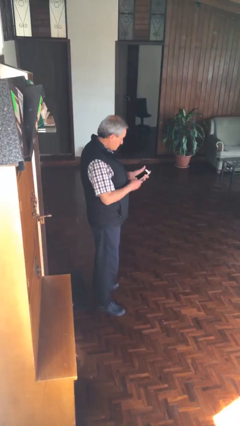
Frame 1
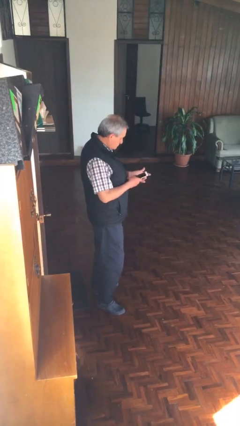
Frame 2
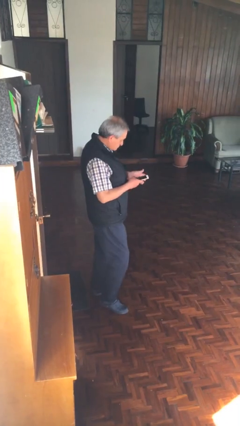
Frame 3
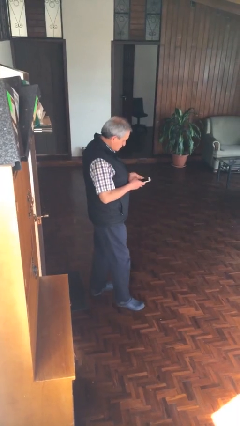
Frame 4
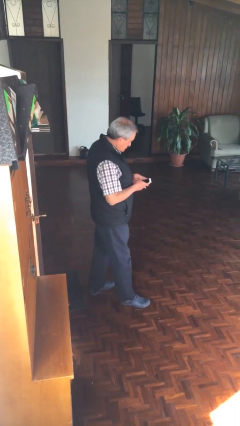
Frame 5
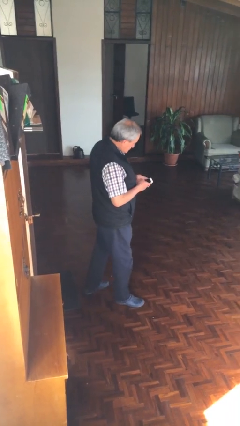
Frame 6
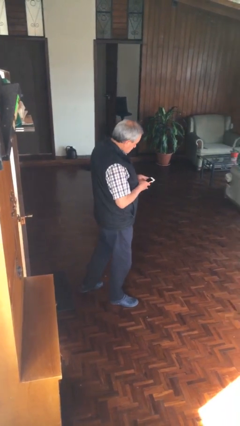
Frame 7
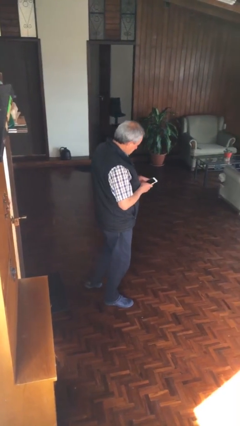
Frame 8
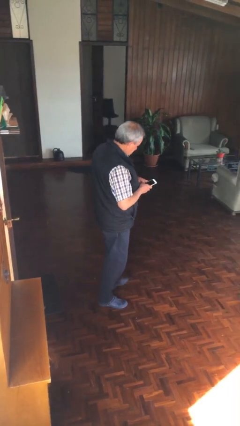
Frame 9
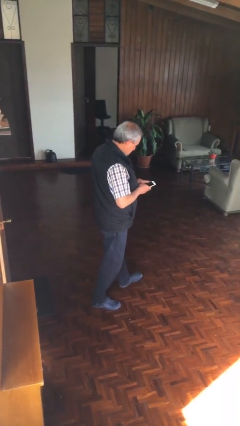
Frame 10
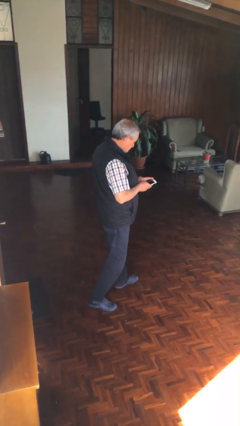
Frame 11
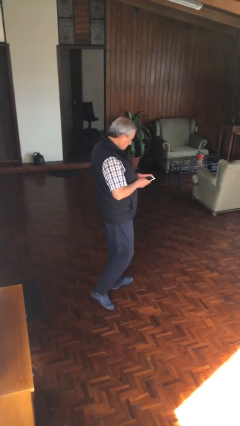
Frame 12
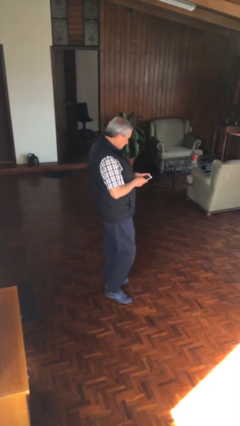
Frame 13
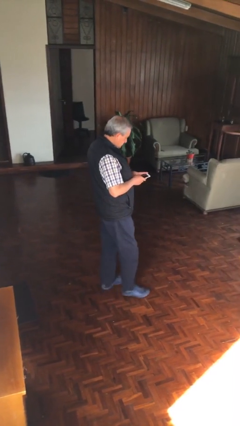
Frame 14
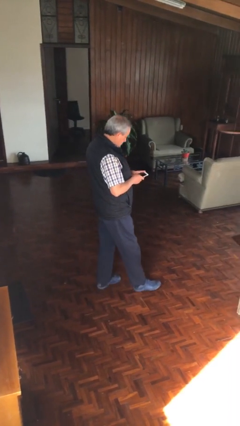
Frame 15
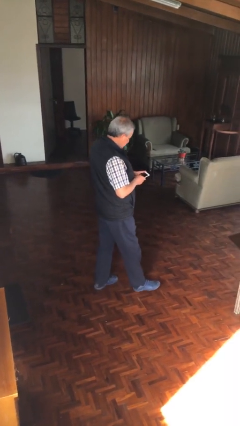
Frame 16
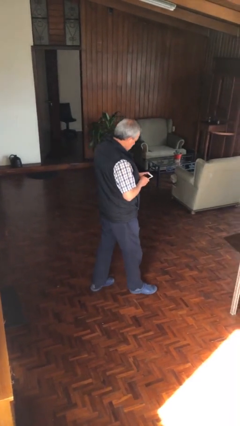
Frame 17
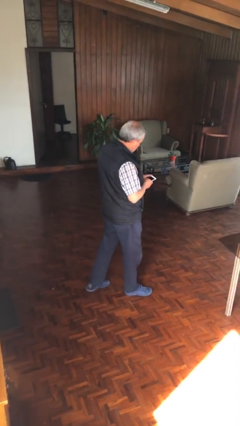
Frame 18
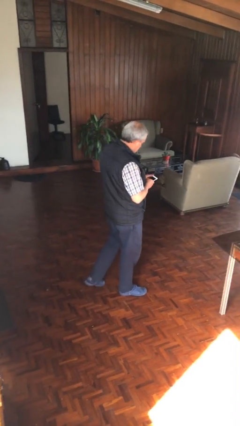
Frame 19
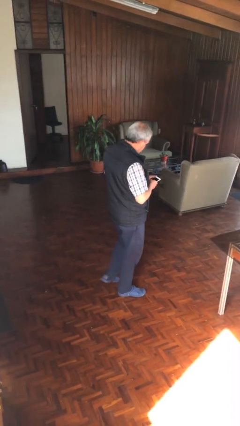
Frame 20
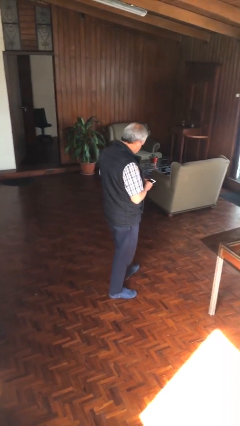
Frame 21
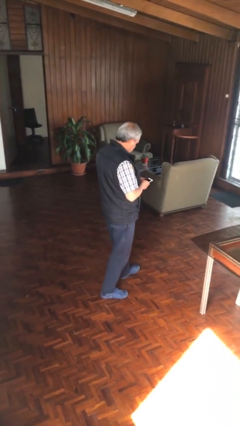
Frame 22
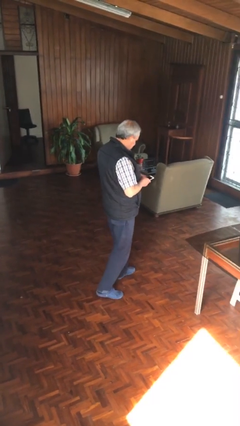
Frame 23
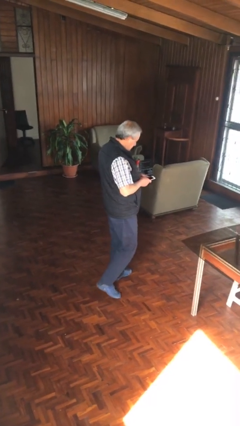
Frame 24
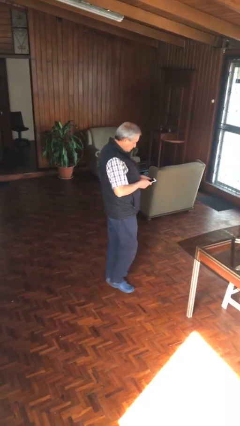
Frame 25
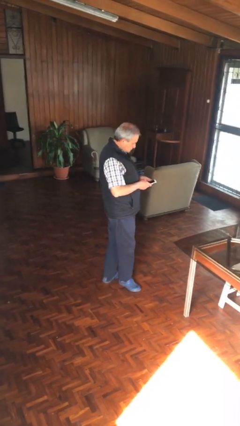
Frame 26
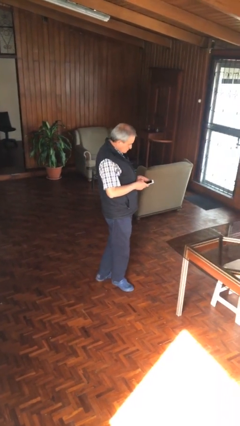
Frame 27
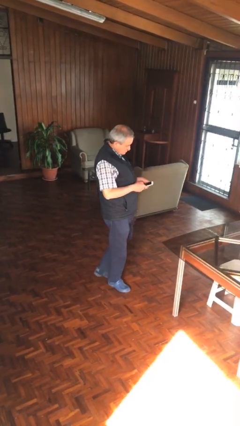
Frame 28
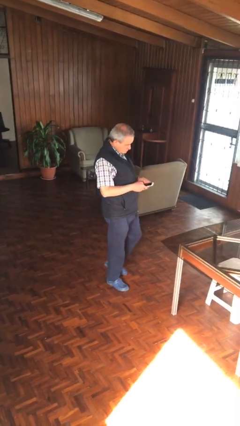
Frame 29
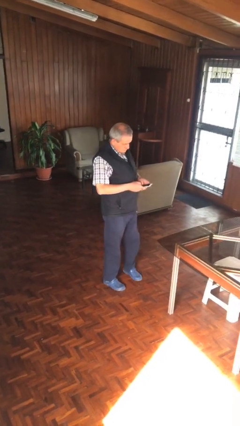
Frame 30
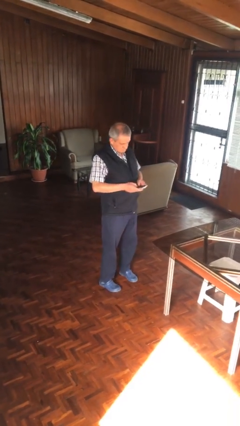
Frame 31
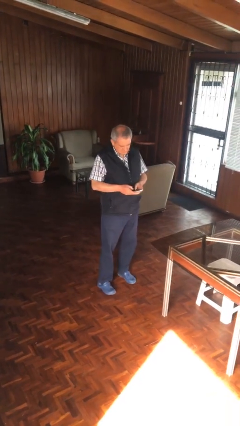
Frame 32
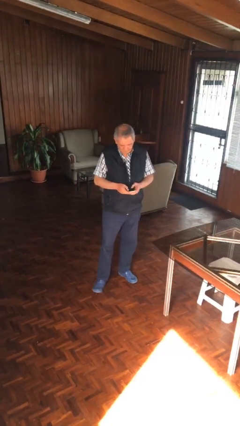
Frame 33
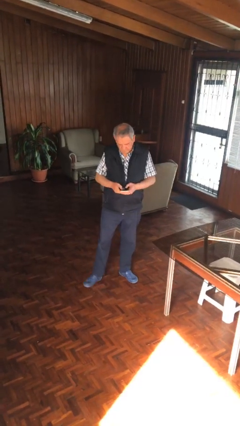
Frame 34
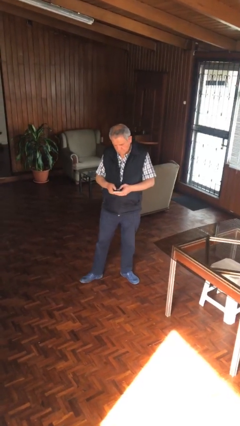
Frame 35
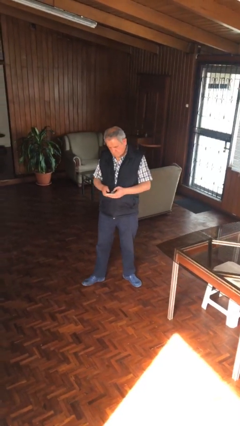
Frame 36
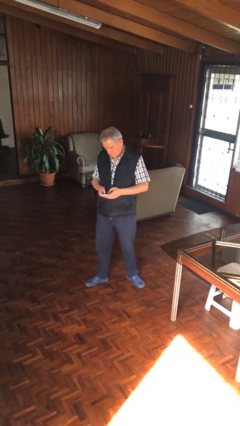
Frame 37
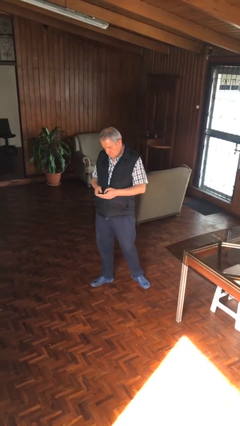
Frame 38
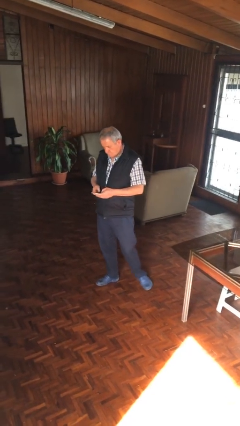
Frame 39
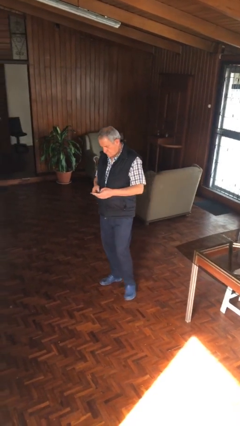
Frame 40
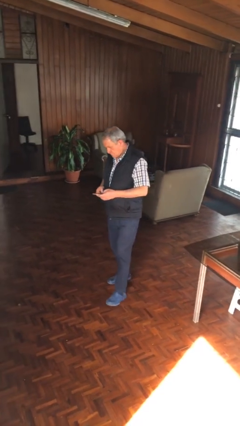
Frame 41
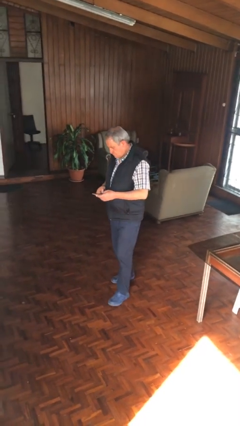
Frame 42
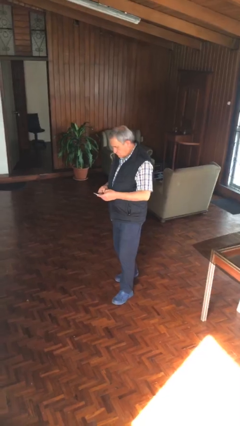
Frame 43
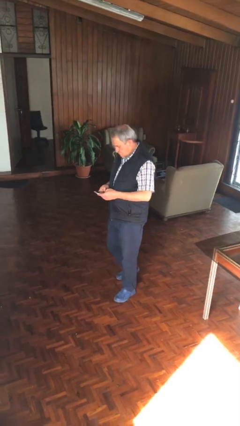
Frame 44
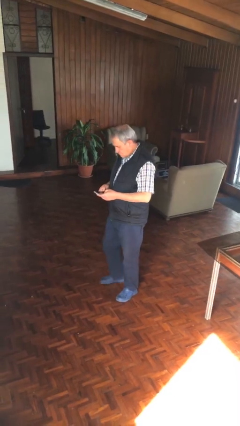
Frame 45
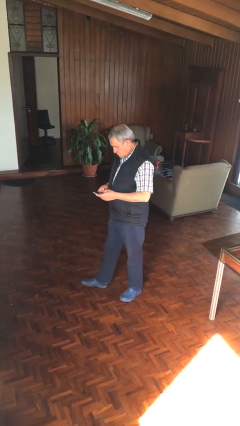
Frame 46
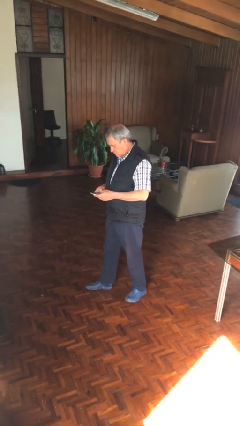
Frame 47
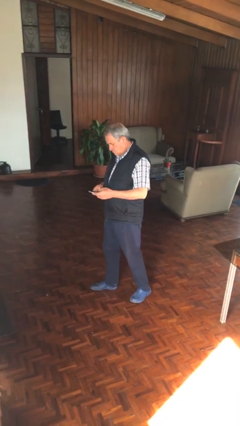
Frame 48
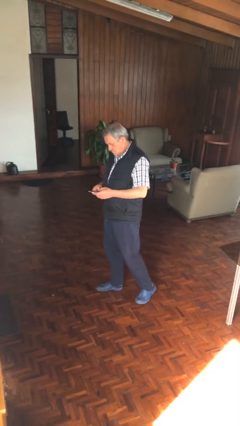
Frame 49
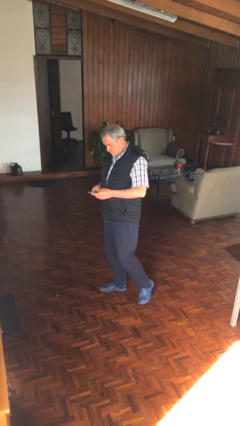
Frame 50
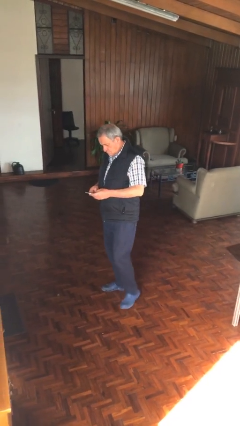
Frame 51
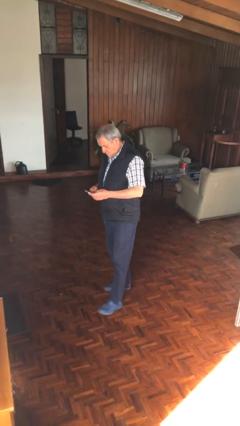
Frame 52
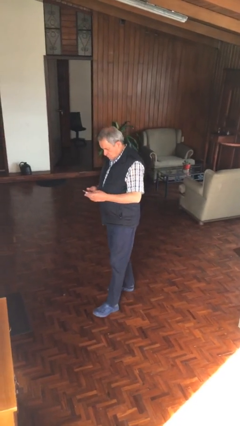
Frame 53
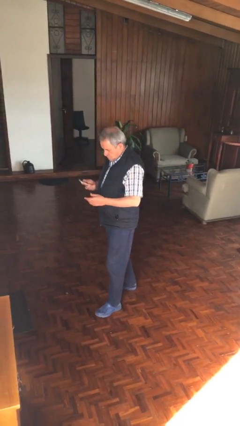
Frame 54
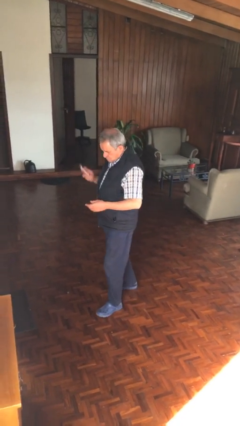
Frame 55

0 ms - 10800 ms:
person texts on phone

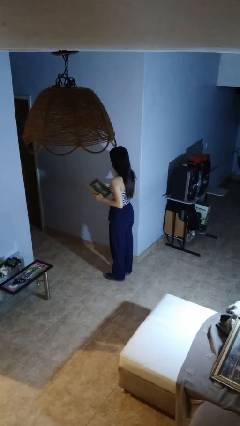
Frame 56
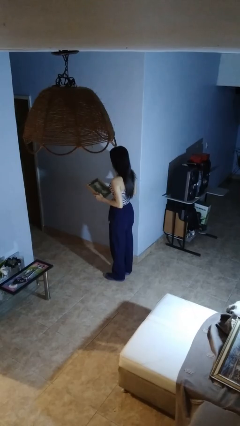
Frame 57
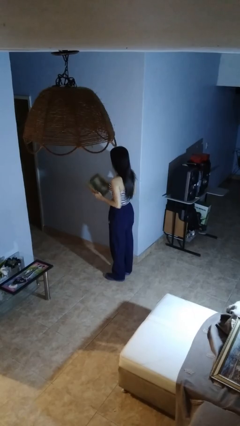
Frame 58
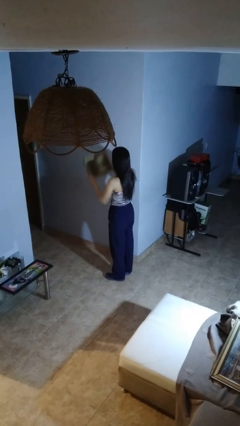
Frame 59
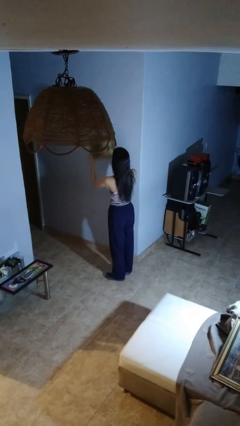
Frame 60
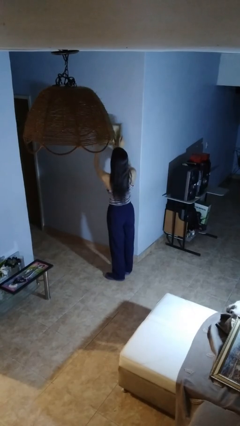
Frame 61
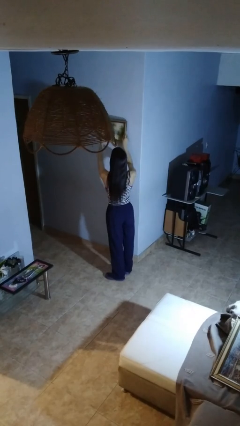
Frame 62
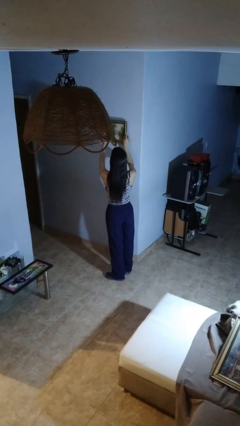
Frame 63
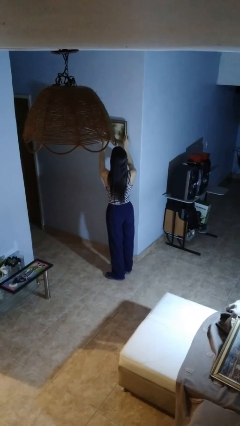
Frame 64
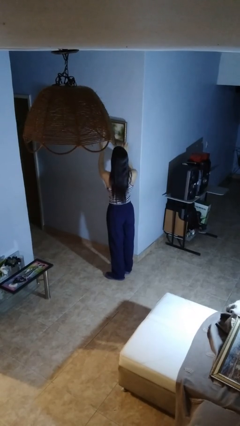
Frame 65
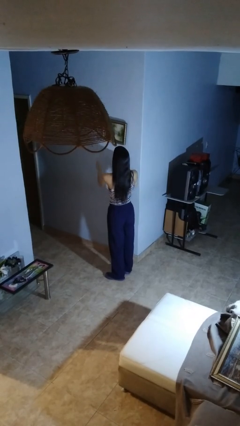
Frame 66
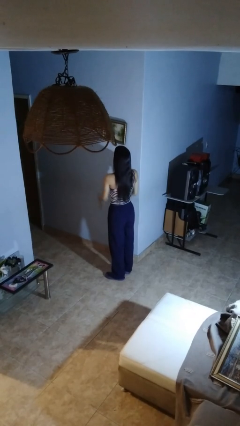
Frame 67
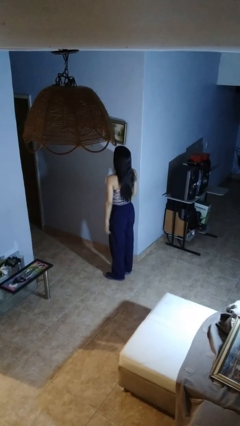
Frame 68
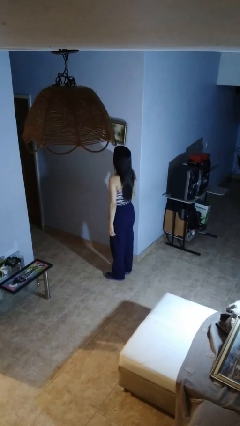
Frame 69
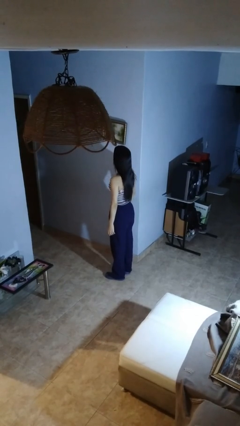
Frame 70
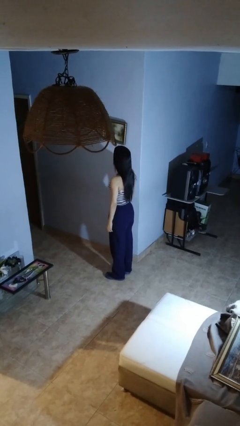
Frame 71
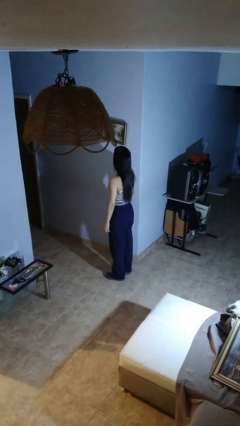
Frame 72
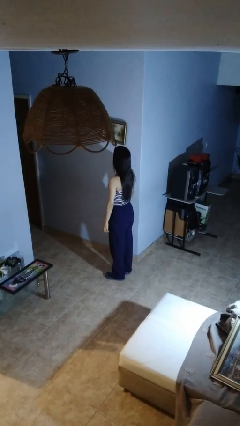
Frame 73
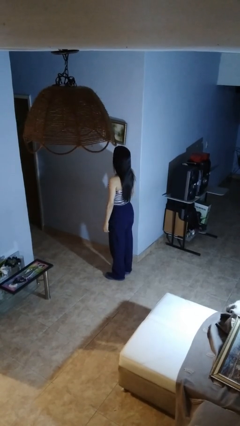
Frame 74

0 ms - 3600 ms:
person puts up picture frame

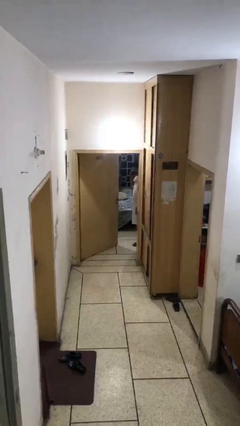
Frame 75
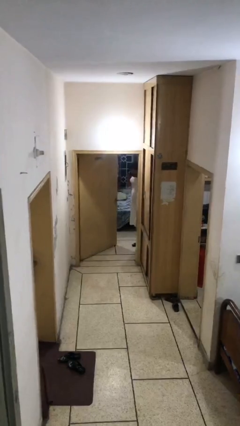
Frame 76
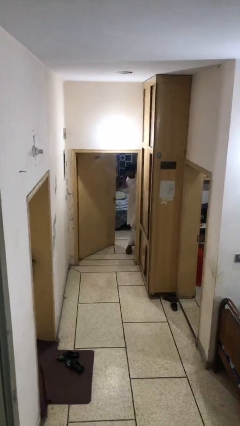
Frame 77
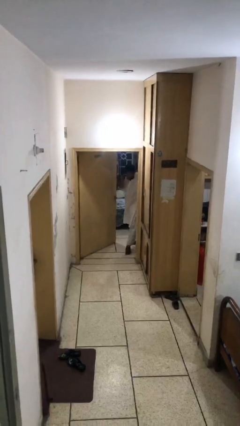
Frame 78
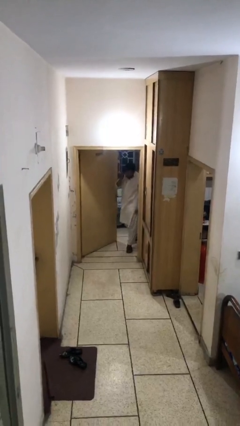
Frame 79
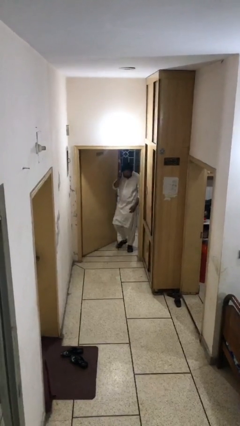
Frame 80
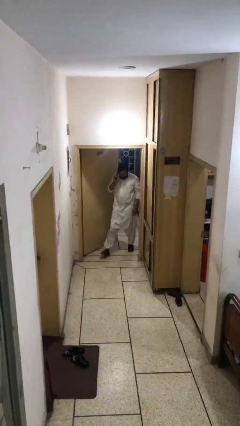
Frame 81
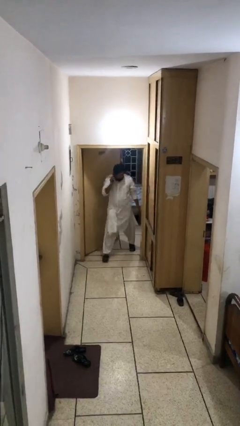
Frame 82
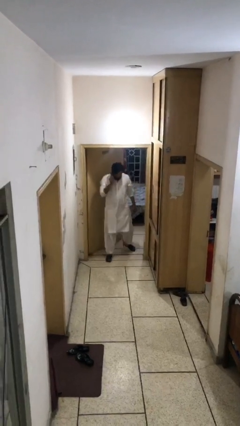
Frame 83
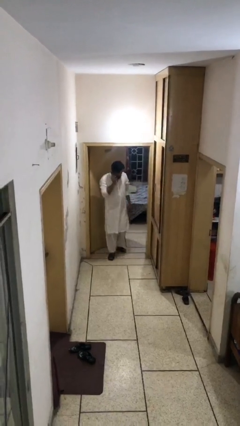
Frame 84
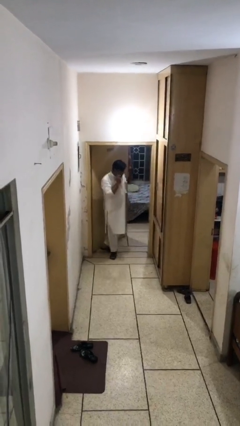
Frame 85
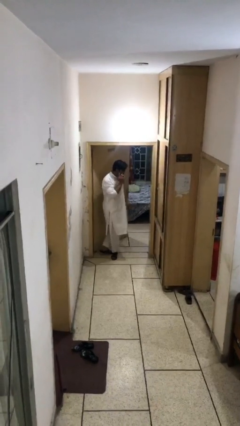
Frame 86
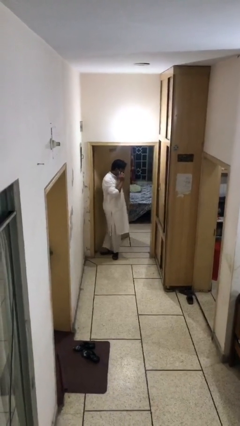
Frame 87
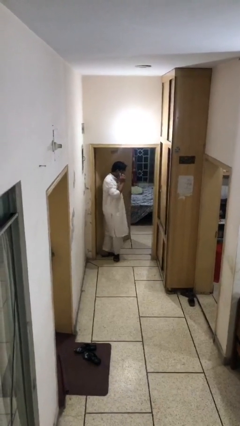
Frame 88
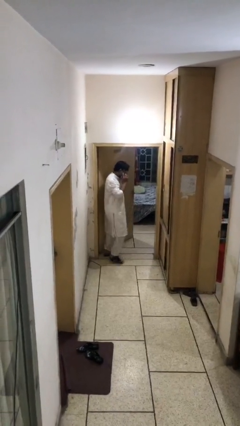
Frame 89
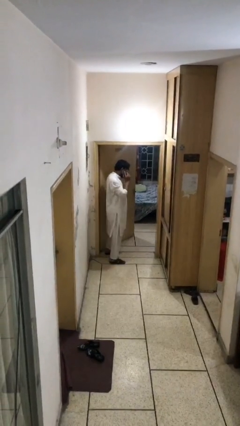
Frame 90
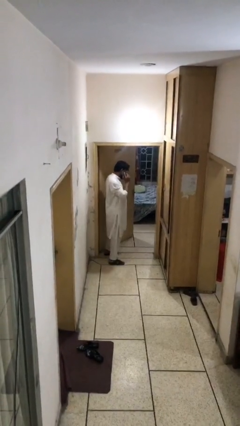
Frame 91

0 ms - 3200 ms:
person enters scene through structure

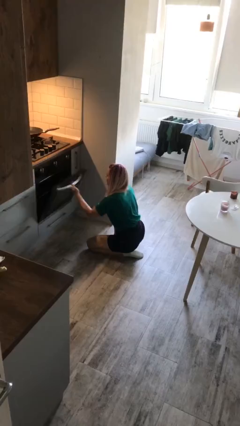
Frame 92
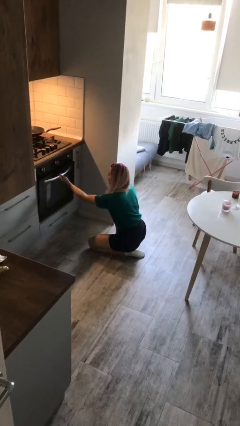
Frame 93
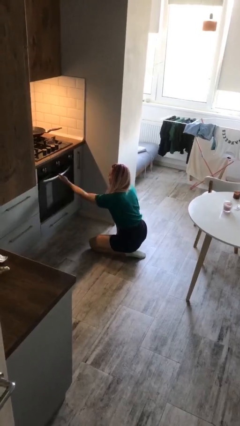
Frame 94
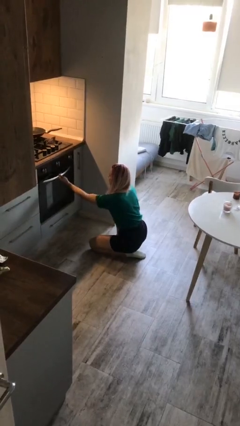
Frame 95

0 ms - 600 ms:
person closes oven door
